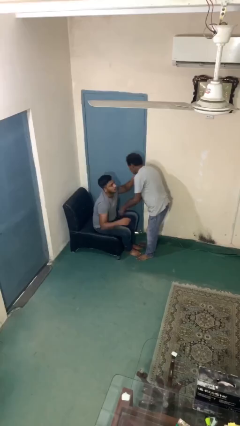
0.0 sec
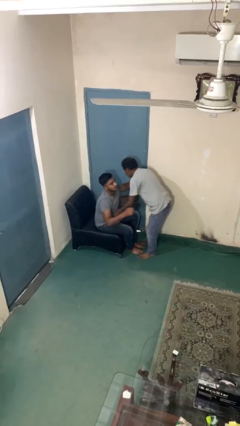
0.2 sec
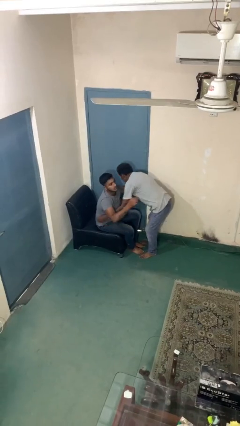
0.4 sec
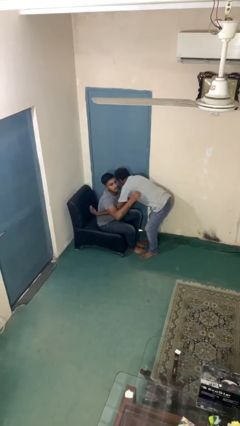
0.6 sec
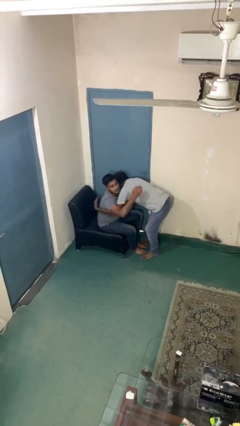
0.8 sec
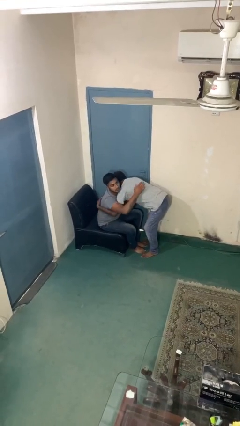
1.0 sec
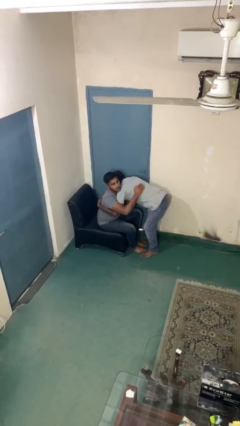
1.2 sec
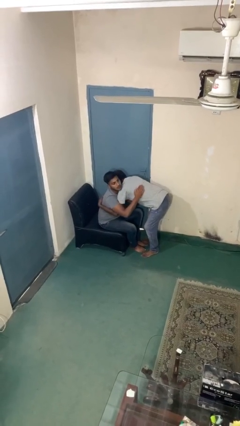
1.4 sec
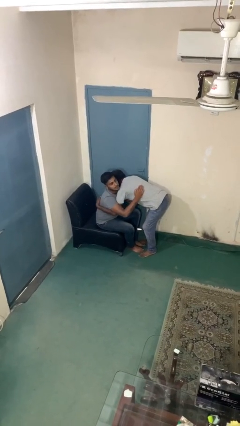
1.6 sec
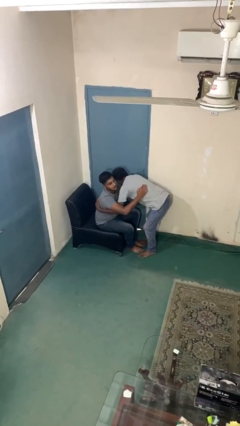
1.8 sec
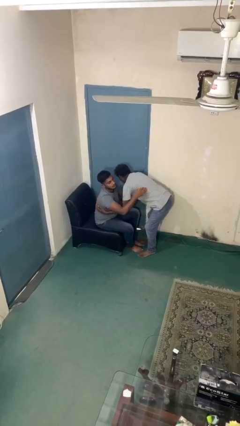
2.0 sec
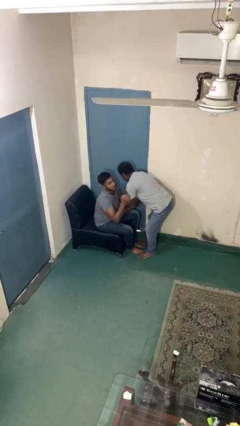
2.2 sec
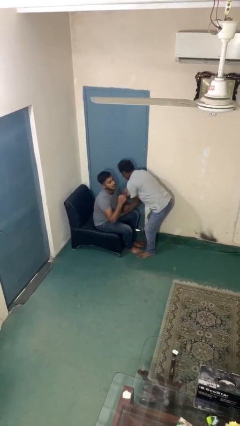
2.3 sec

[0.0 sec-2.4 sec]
person embraces person

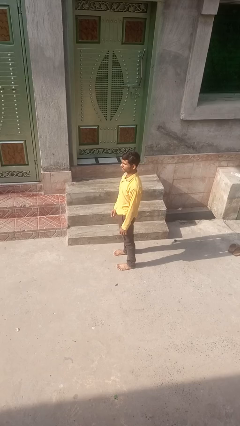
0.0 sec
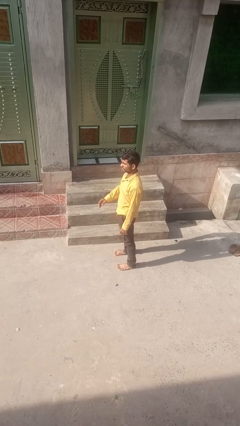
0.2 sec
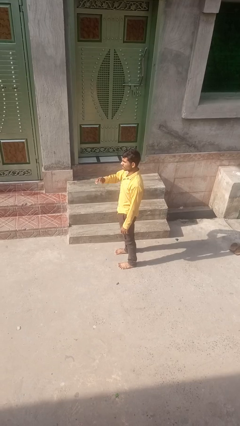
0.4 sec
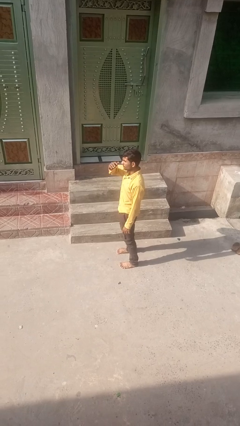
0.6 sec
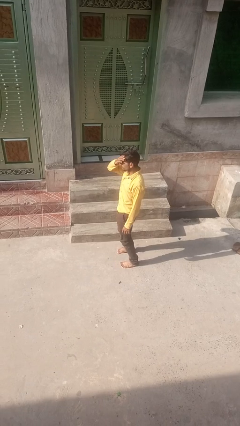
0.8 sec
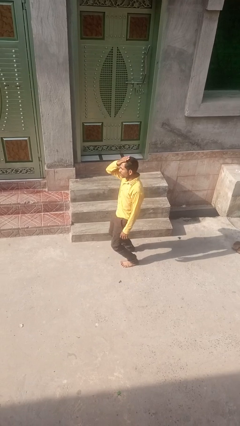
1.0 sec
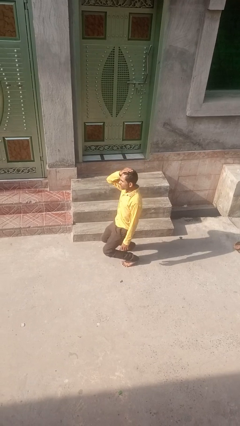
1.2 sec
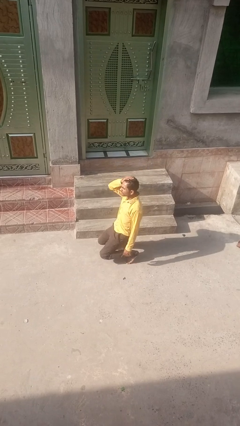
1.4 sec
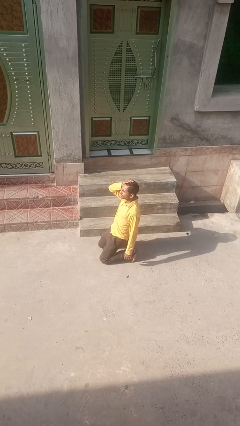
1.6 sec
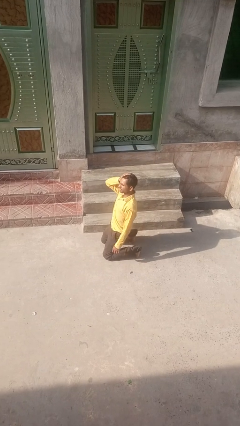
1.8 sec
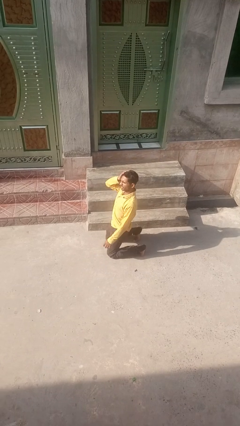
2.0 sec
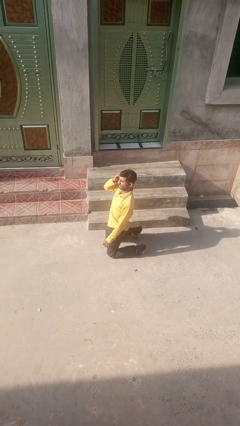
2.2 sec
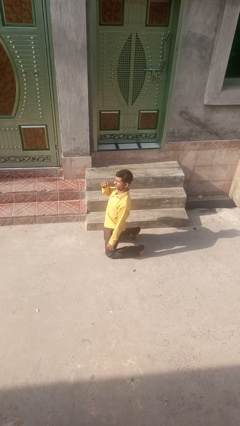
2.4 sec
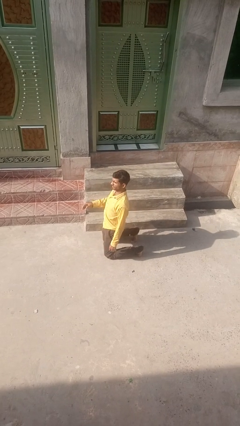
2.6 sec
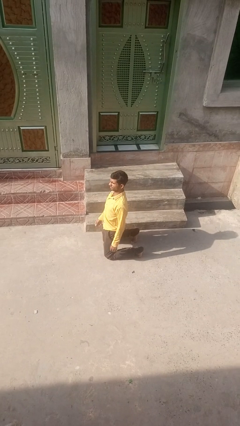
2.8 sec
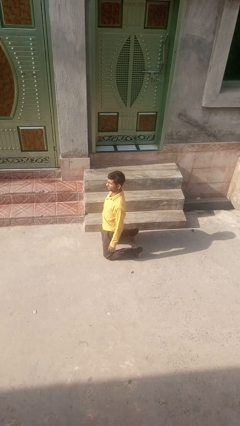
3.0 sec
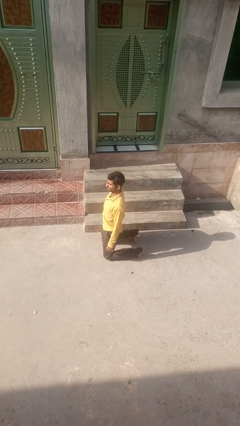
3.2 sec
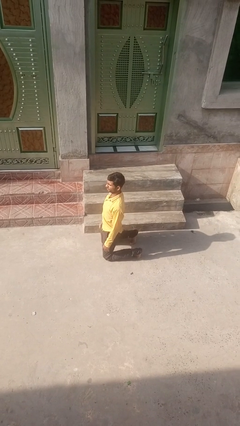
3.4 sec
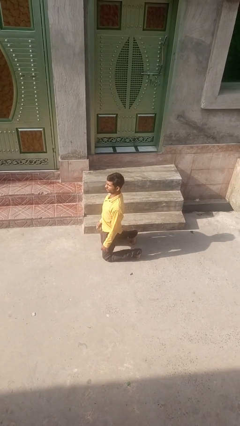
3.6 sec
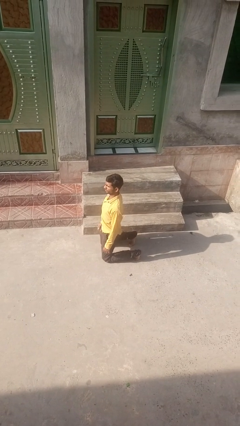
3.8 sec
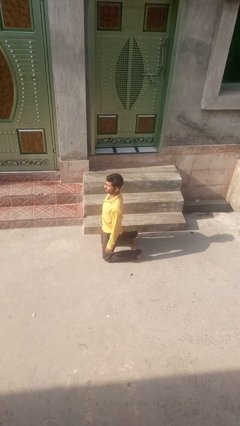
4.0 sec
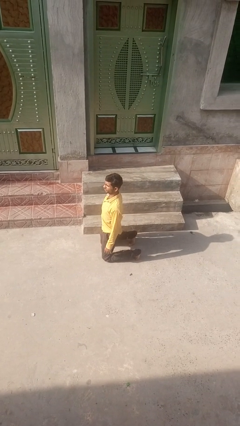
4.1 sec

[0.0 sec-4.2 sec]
person kneels

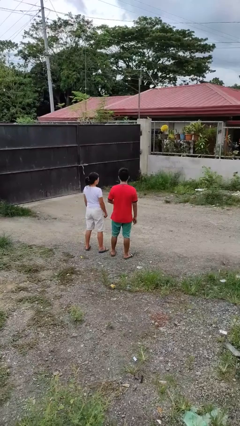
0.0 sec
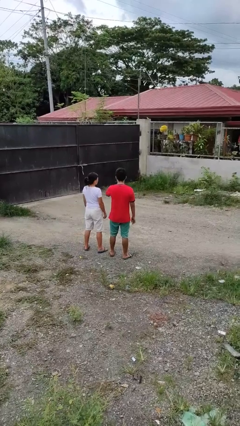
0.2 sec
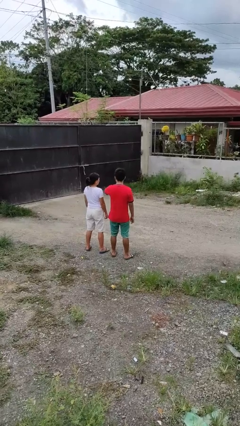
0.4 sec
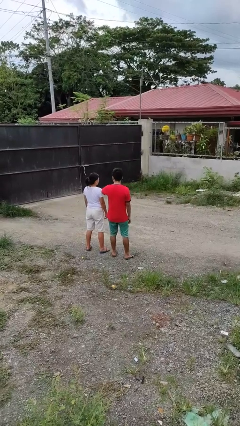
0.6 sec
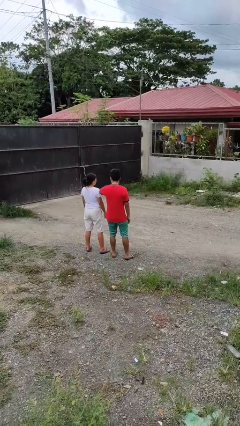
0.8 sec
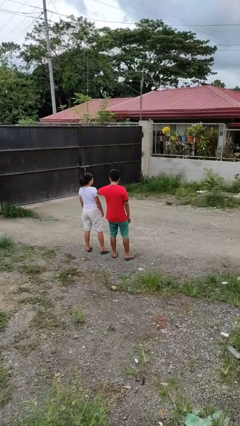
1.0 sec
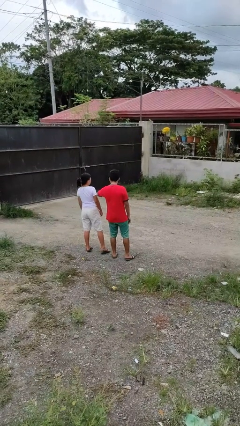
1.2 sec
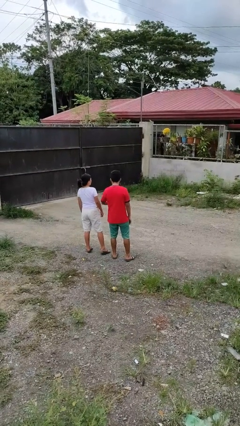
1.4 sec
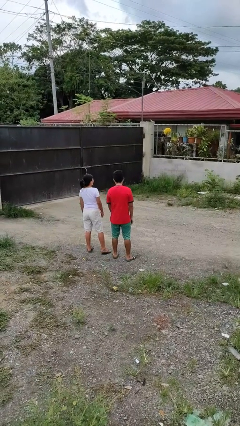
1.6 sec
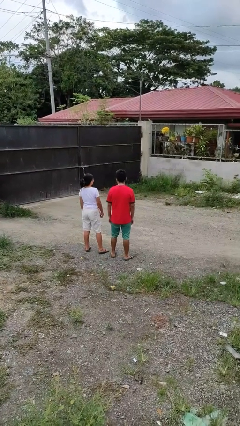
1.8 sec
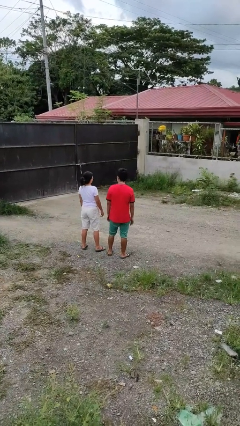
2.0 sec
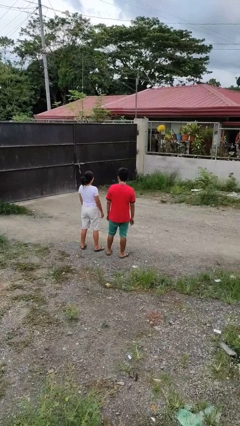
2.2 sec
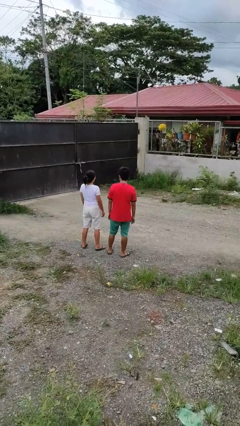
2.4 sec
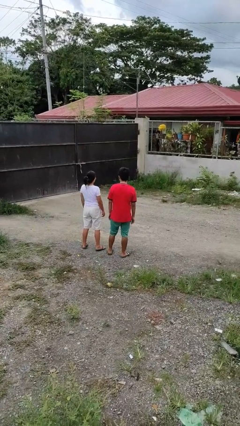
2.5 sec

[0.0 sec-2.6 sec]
person nudges person with elbow

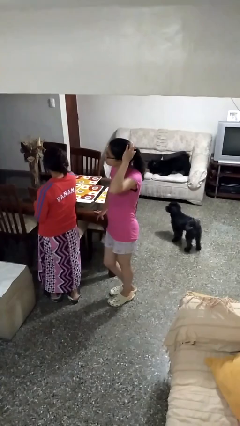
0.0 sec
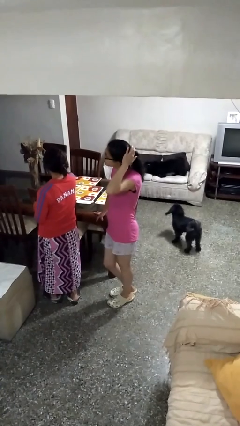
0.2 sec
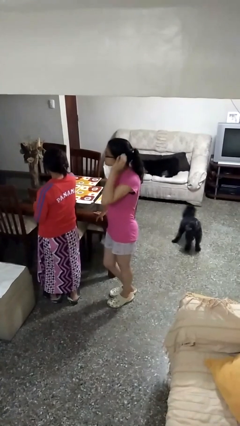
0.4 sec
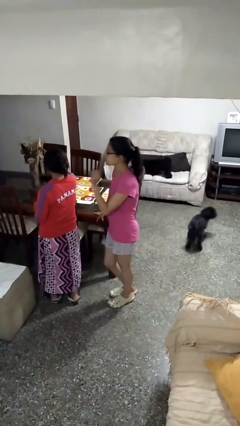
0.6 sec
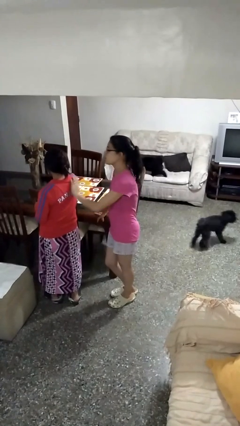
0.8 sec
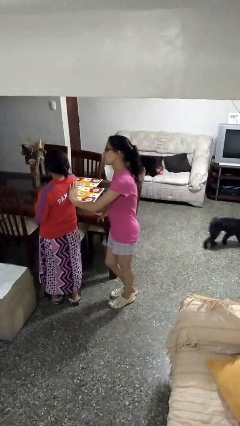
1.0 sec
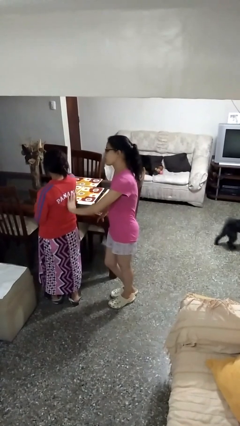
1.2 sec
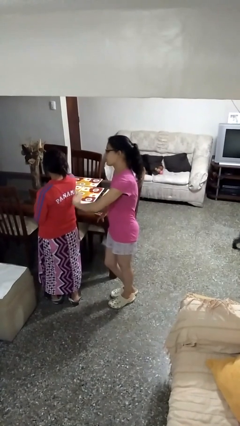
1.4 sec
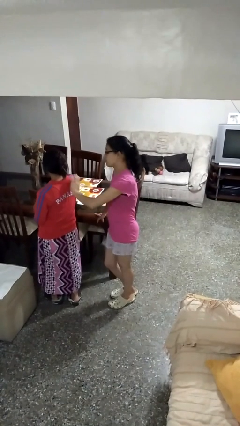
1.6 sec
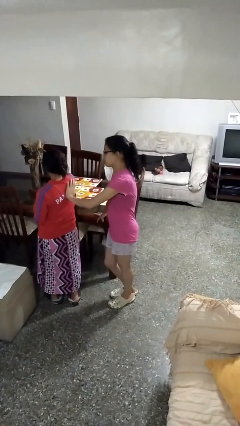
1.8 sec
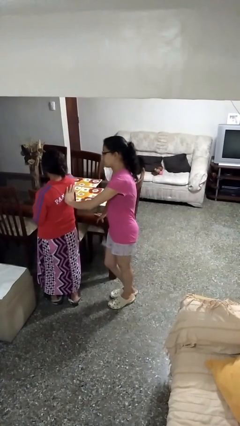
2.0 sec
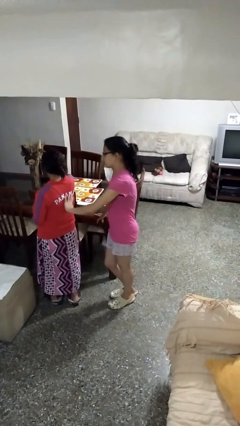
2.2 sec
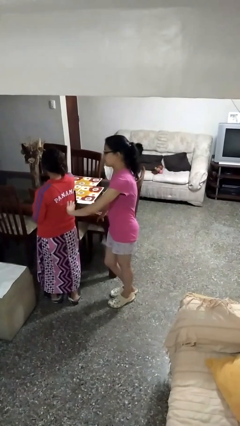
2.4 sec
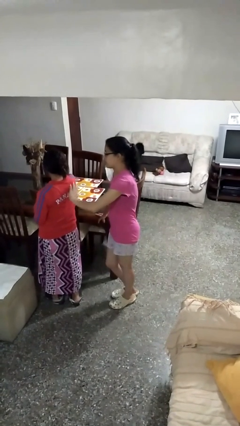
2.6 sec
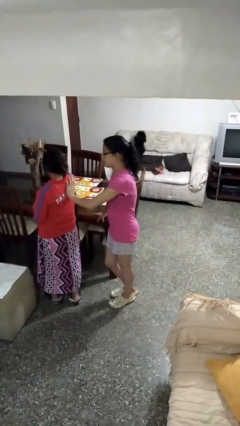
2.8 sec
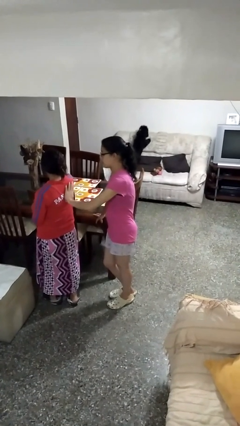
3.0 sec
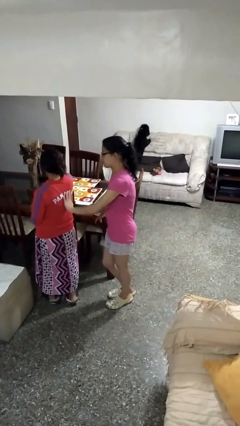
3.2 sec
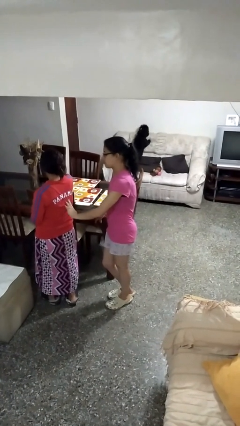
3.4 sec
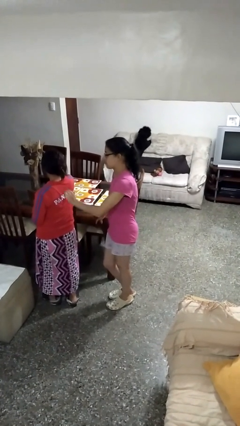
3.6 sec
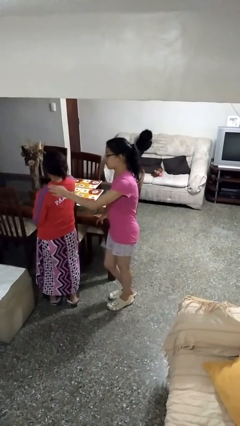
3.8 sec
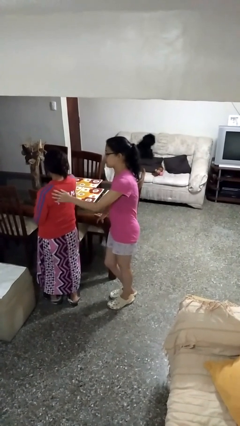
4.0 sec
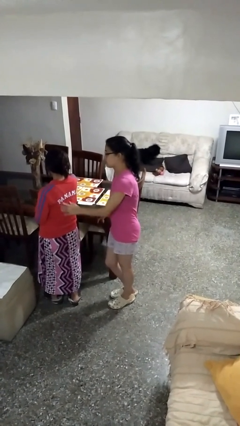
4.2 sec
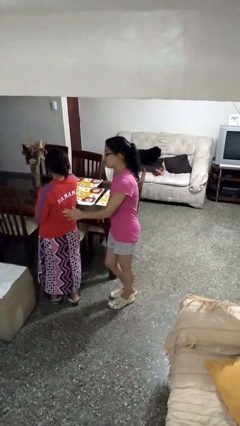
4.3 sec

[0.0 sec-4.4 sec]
person touches back of person

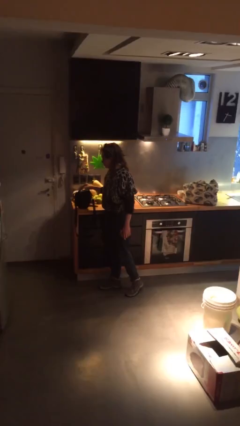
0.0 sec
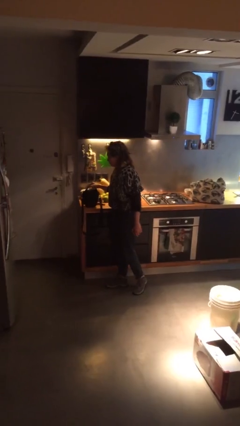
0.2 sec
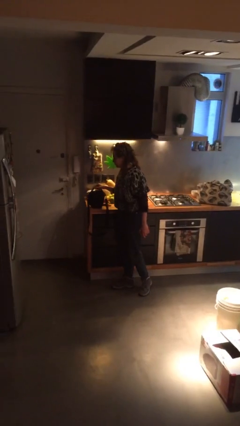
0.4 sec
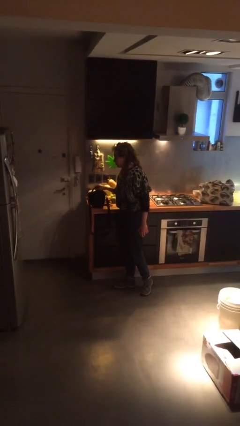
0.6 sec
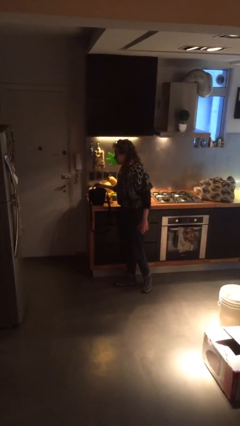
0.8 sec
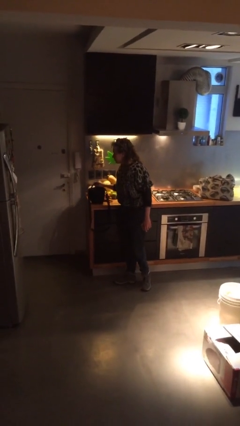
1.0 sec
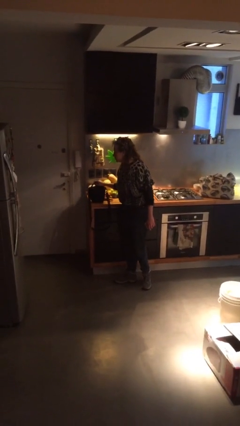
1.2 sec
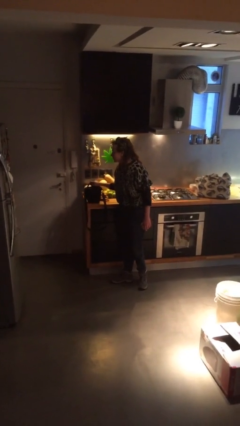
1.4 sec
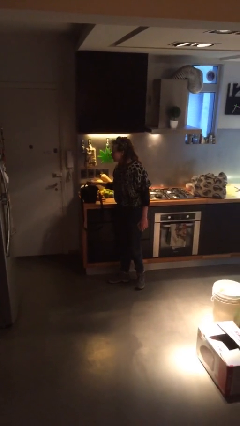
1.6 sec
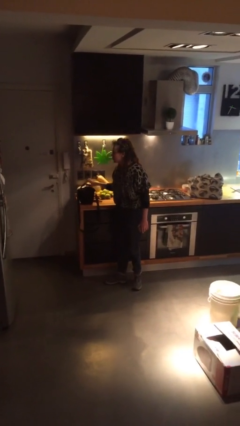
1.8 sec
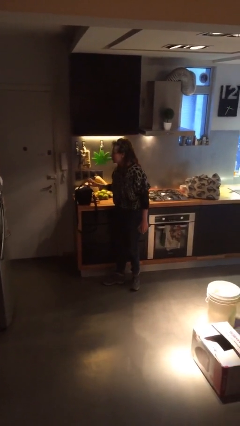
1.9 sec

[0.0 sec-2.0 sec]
person puts down object on table

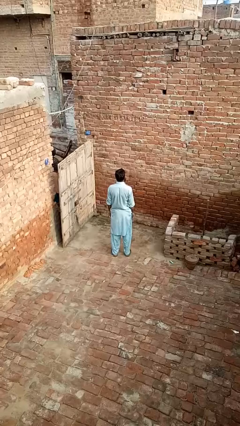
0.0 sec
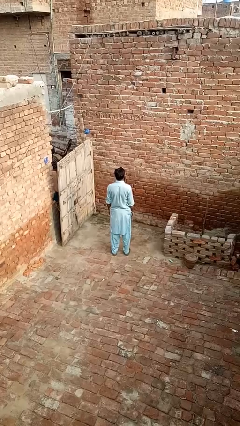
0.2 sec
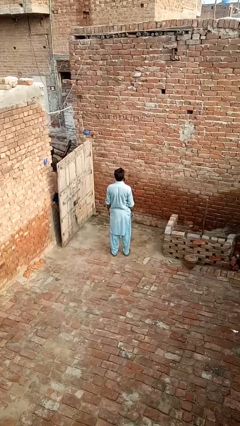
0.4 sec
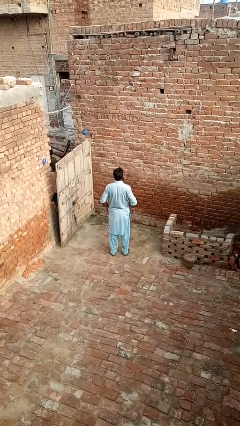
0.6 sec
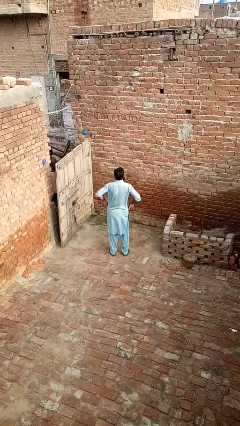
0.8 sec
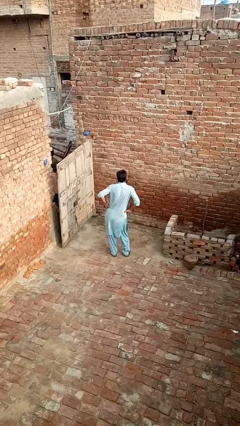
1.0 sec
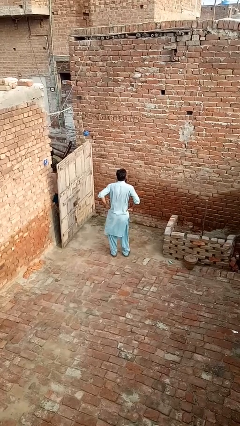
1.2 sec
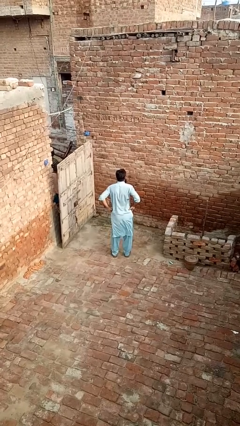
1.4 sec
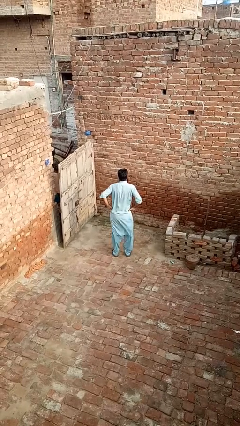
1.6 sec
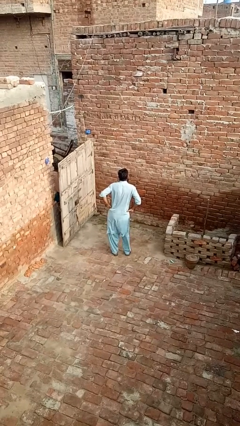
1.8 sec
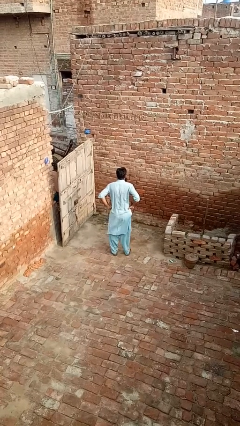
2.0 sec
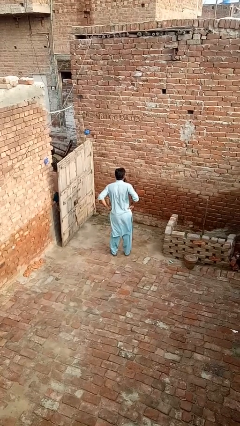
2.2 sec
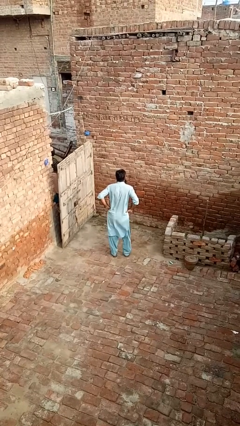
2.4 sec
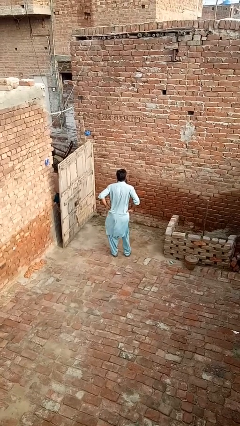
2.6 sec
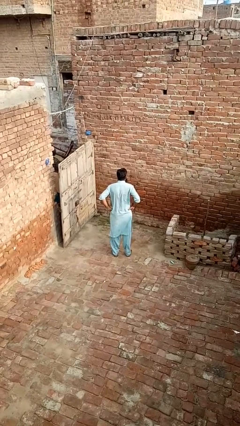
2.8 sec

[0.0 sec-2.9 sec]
person wiggles hips
